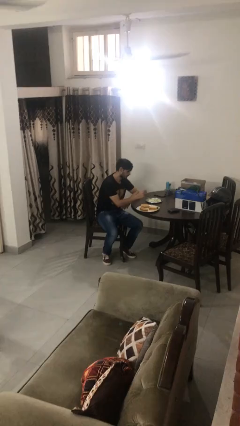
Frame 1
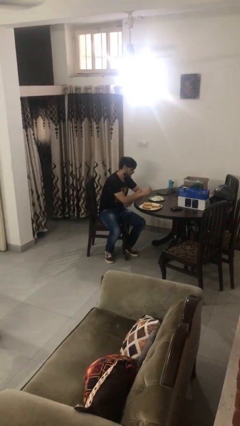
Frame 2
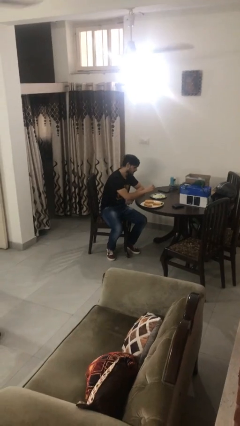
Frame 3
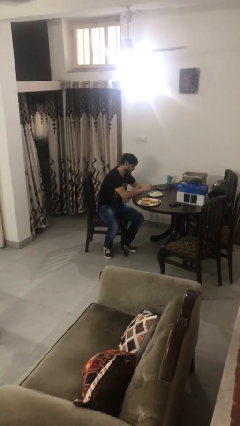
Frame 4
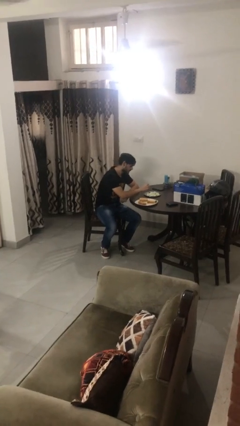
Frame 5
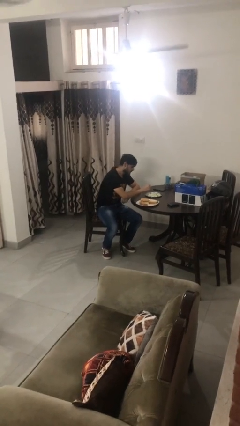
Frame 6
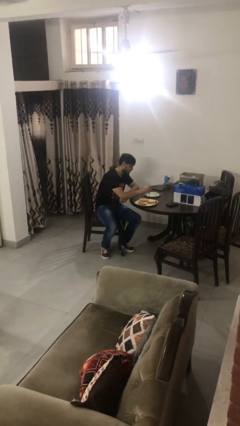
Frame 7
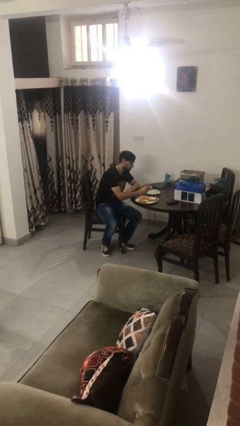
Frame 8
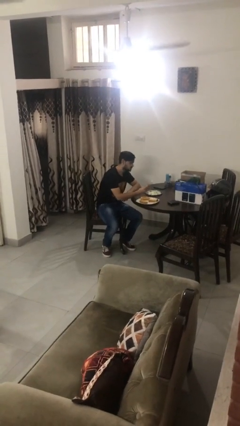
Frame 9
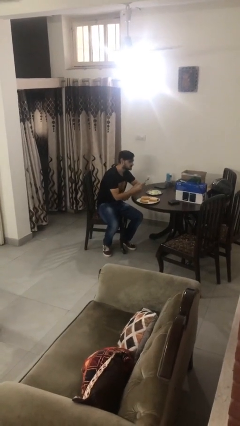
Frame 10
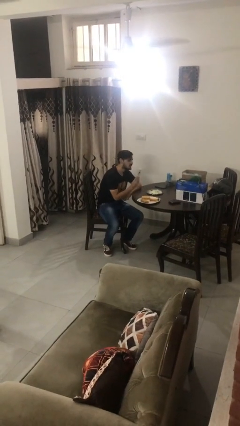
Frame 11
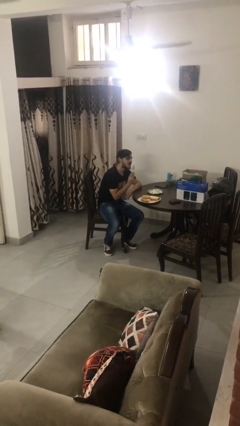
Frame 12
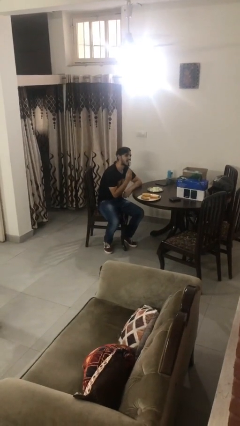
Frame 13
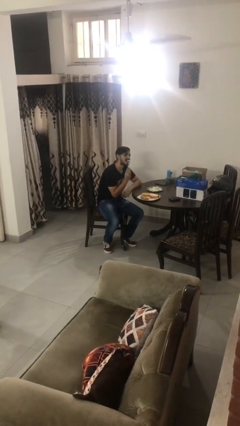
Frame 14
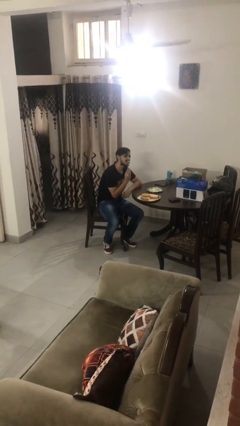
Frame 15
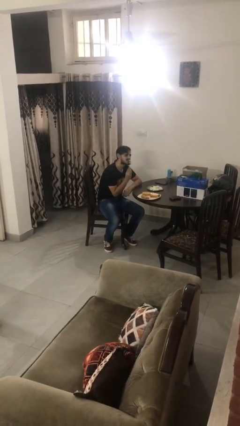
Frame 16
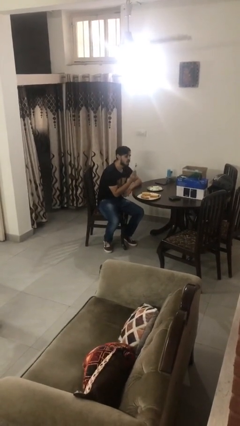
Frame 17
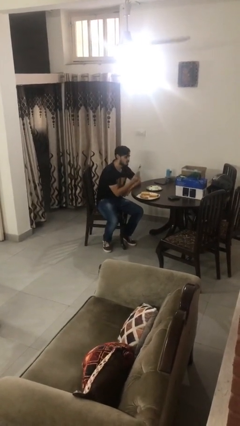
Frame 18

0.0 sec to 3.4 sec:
person eats with utensil

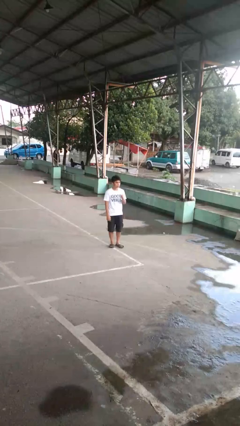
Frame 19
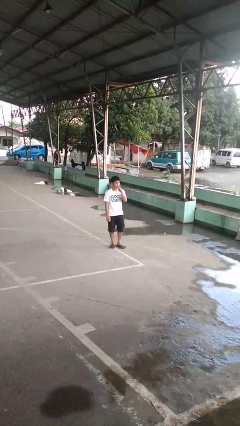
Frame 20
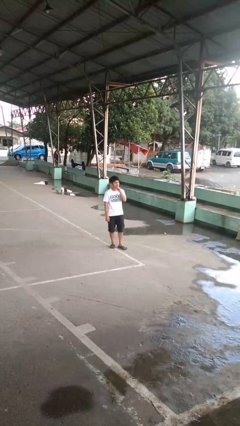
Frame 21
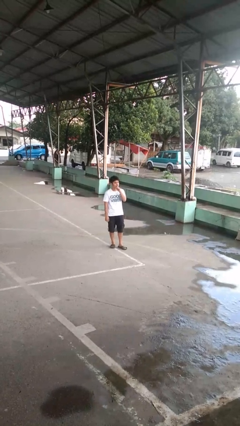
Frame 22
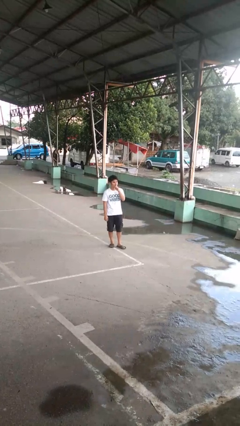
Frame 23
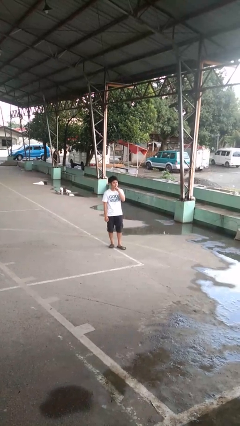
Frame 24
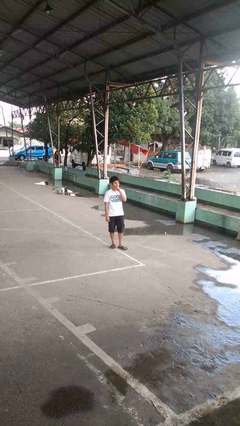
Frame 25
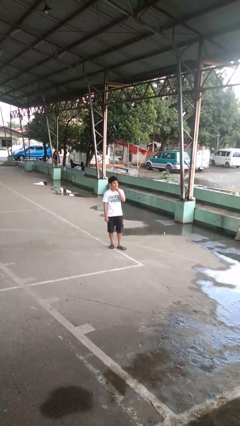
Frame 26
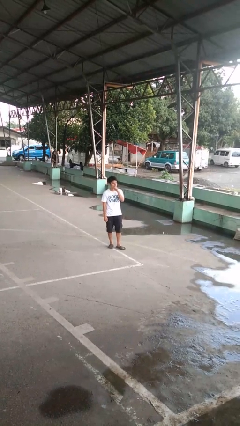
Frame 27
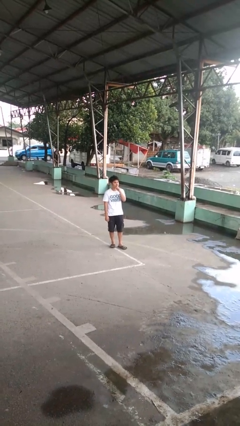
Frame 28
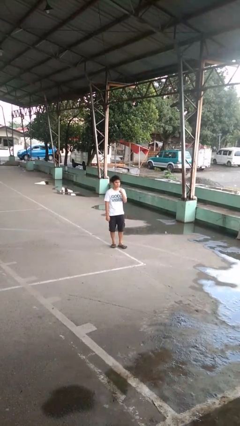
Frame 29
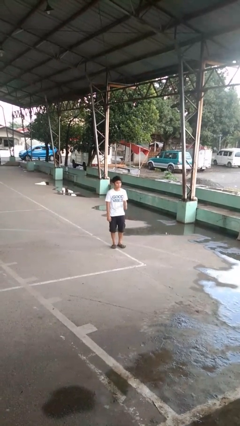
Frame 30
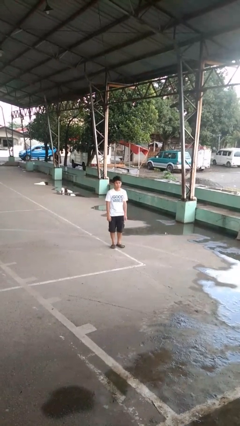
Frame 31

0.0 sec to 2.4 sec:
person gestures be quiet

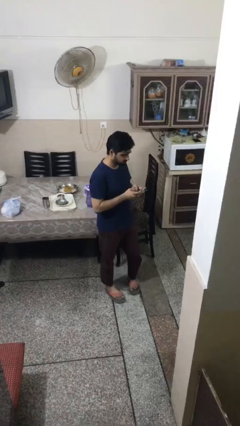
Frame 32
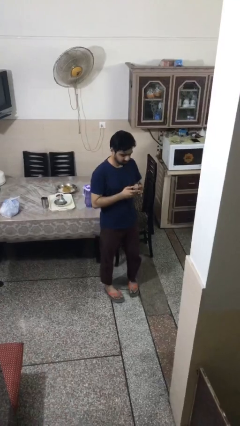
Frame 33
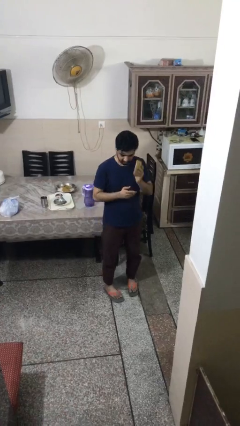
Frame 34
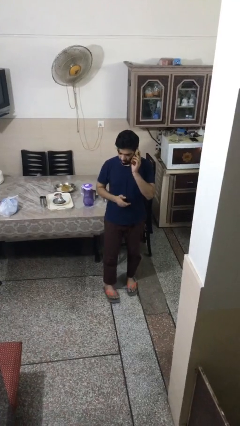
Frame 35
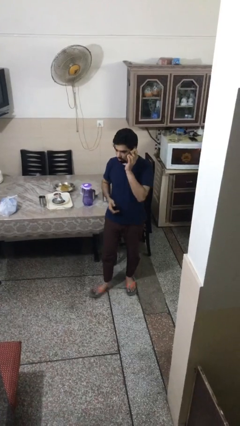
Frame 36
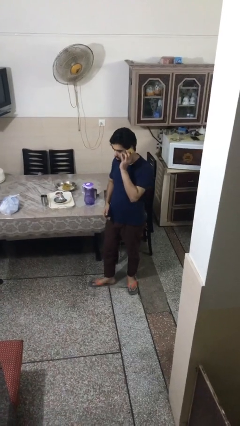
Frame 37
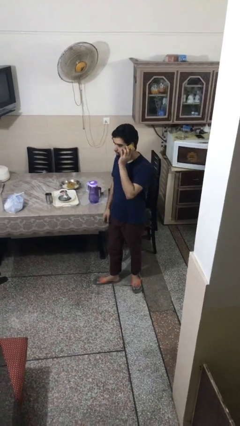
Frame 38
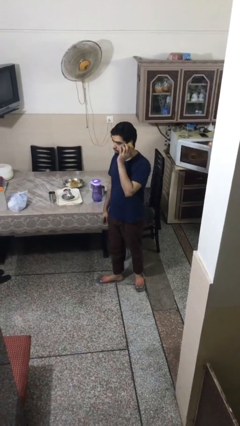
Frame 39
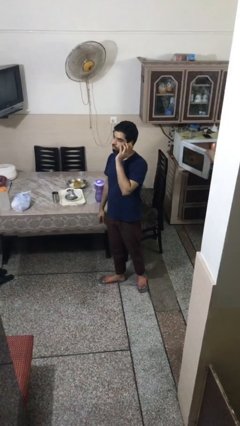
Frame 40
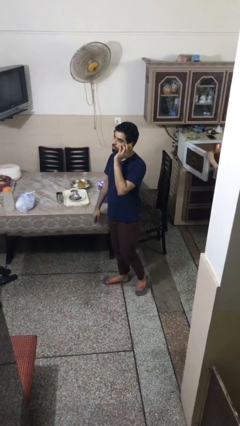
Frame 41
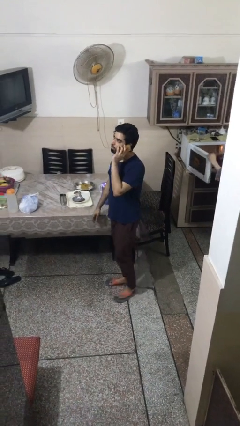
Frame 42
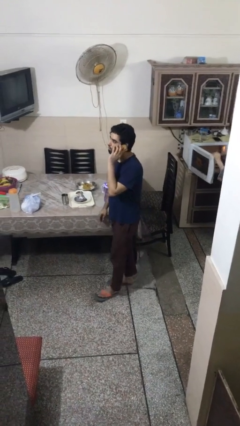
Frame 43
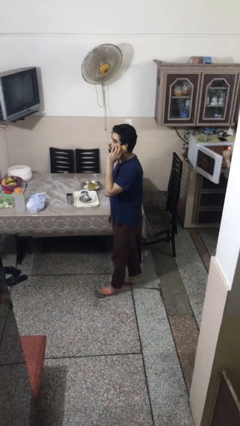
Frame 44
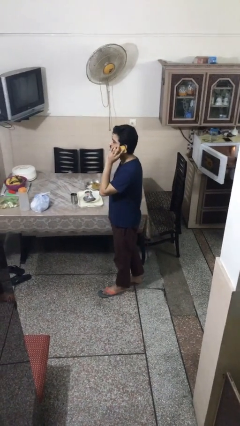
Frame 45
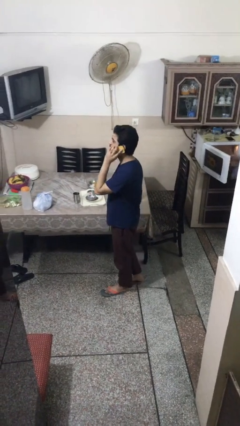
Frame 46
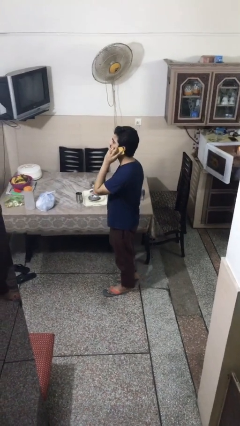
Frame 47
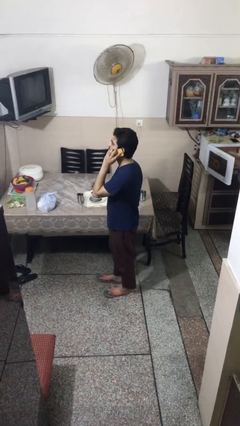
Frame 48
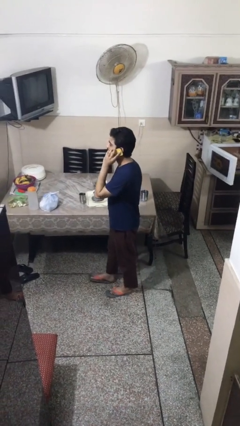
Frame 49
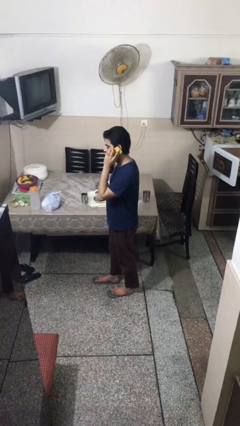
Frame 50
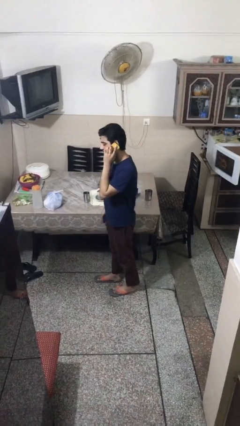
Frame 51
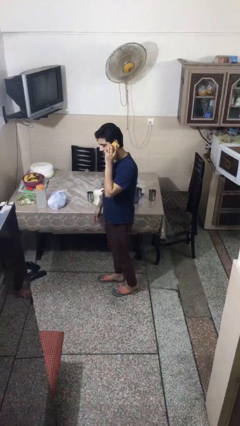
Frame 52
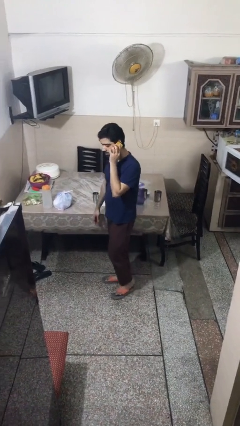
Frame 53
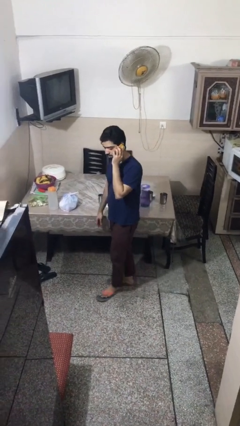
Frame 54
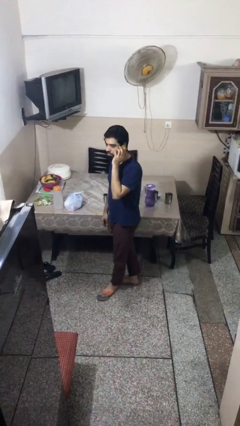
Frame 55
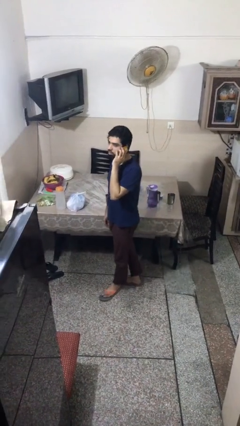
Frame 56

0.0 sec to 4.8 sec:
person talks on phone

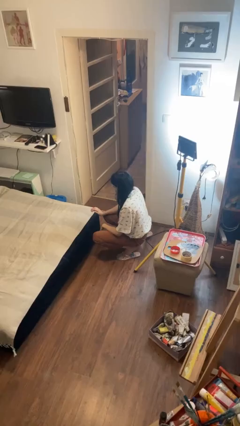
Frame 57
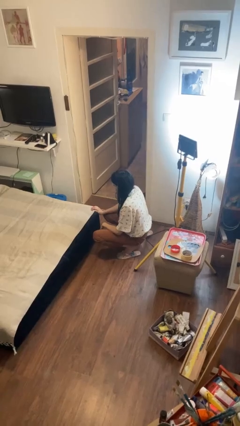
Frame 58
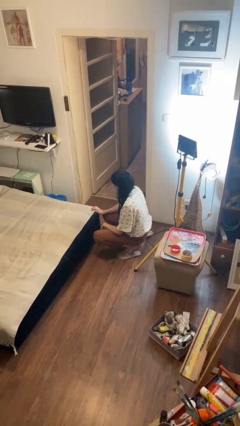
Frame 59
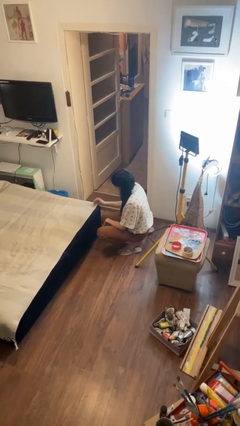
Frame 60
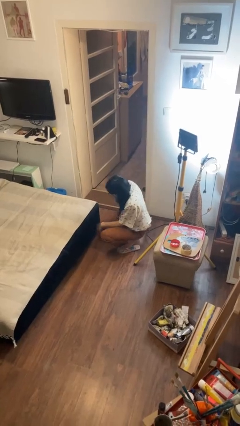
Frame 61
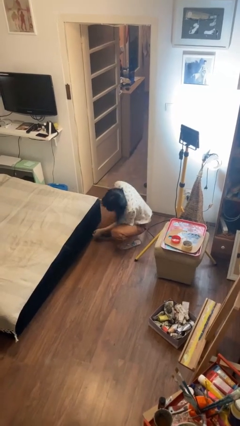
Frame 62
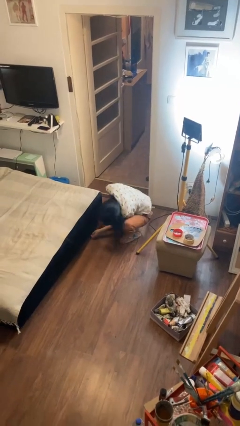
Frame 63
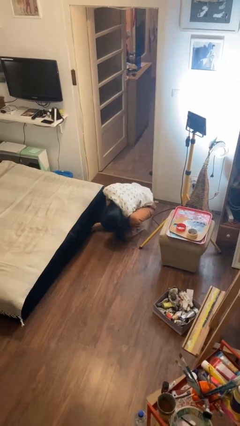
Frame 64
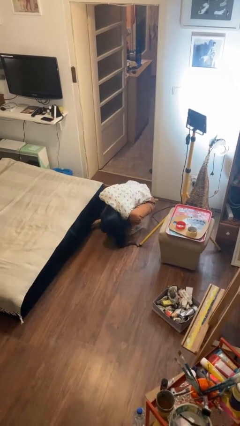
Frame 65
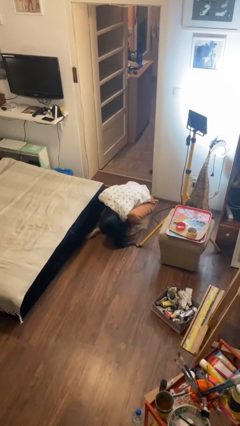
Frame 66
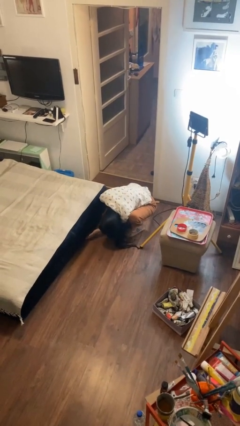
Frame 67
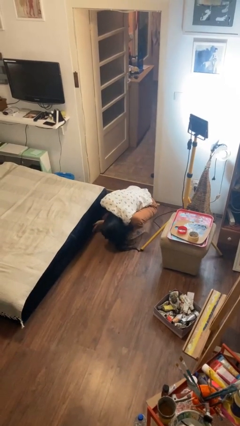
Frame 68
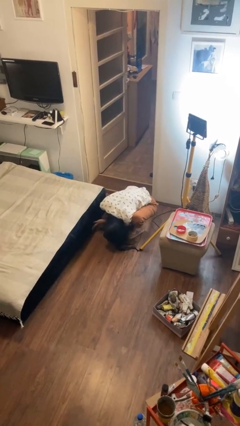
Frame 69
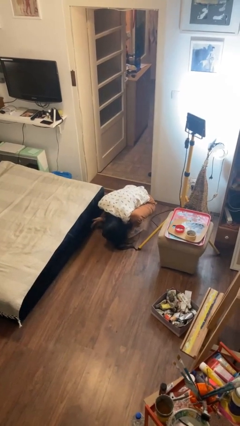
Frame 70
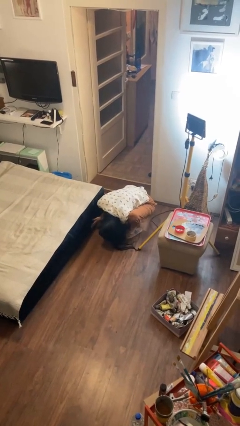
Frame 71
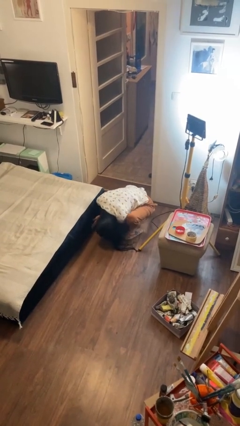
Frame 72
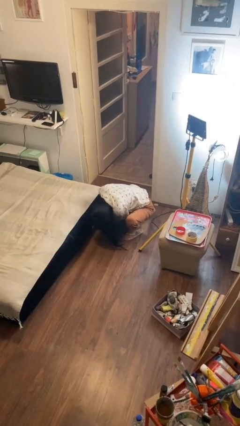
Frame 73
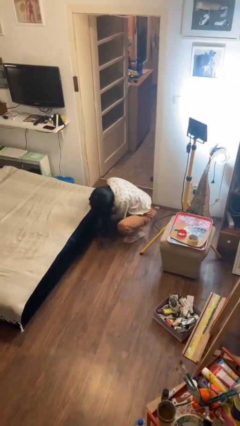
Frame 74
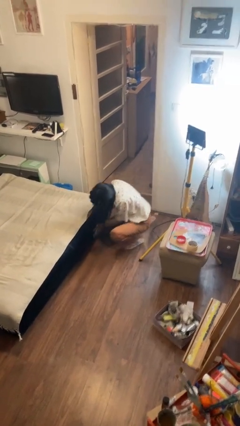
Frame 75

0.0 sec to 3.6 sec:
person searches under bed

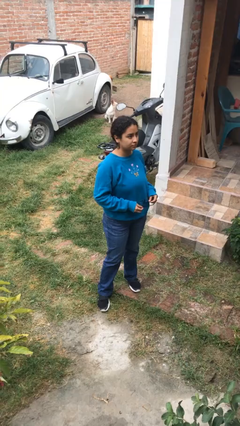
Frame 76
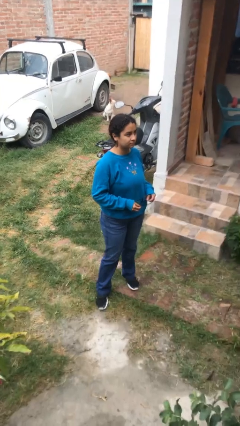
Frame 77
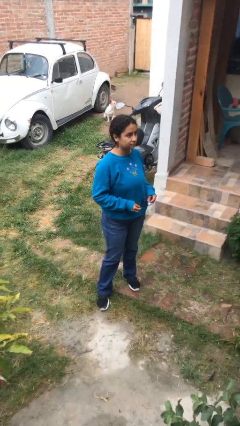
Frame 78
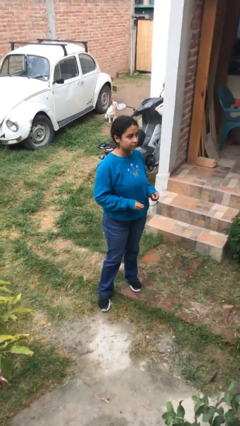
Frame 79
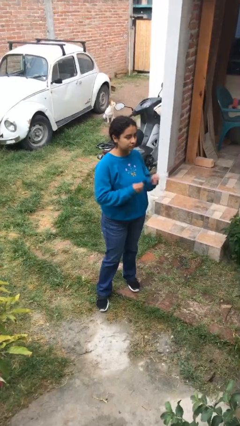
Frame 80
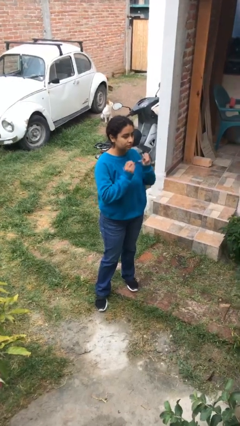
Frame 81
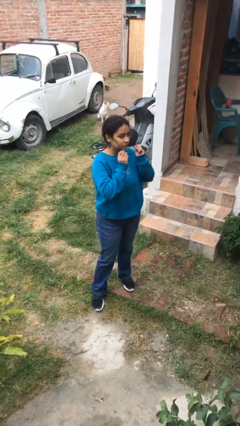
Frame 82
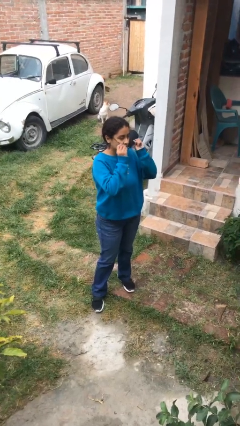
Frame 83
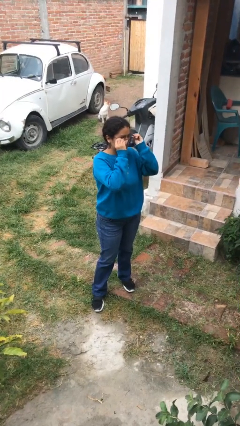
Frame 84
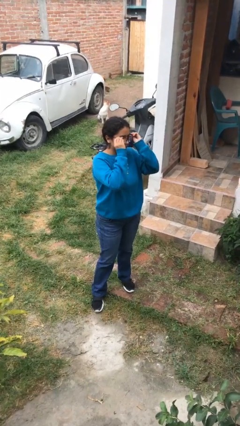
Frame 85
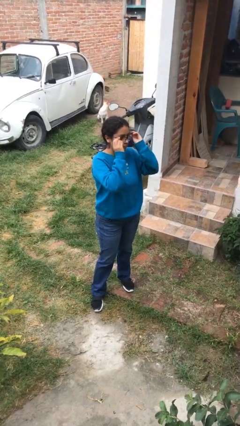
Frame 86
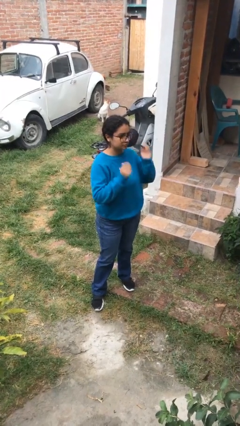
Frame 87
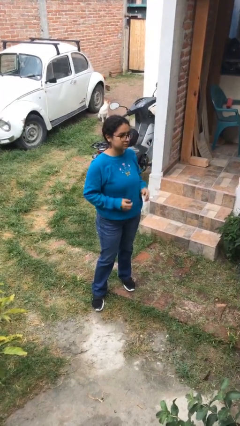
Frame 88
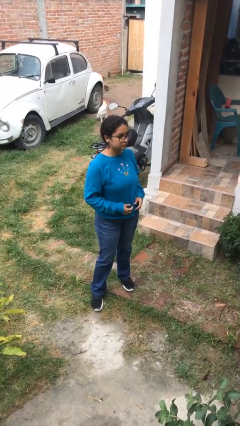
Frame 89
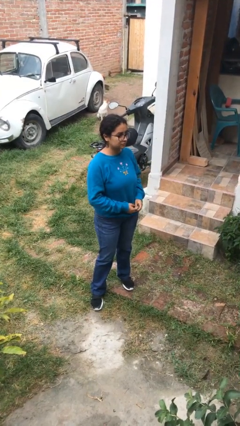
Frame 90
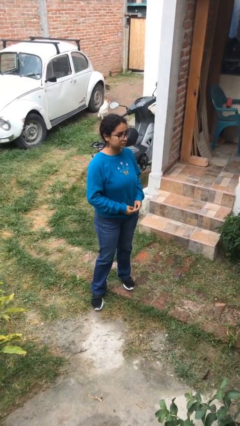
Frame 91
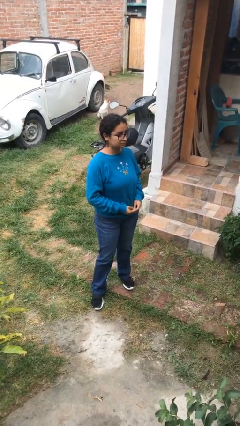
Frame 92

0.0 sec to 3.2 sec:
person puts on glasses

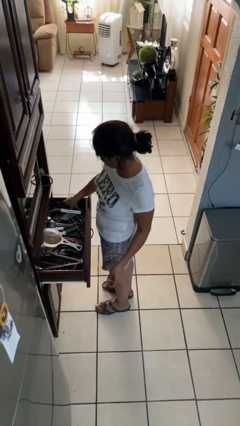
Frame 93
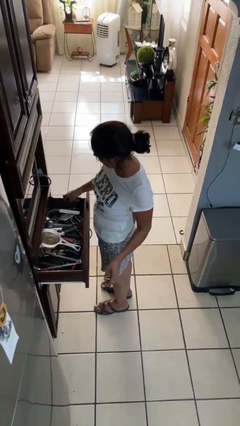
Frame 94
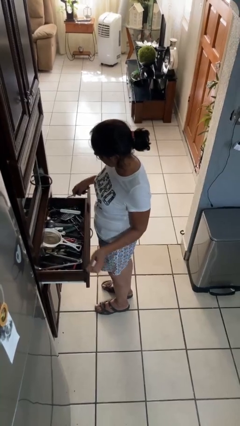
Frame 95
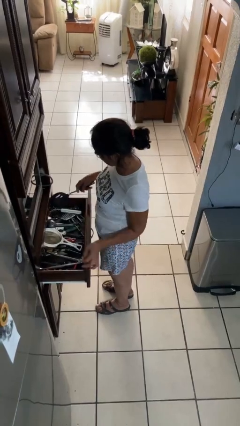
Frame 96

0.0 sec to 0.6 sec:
person takes object from kitchen drawer
